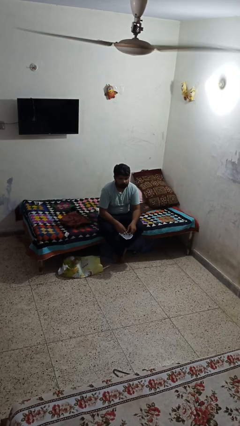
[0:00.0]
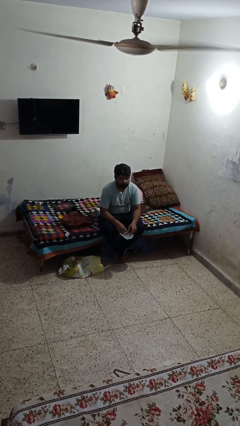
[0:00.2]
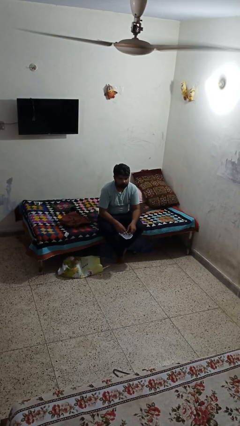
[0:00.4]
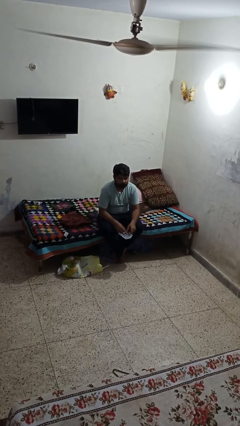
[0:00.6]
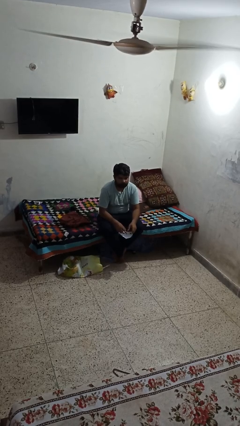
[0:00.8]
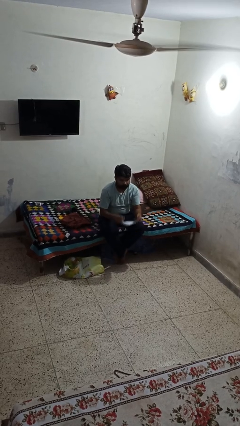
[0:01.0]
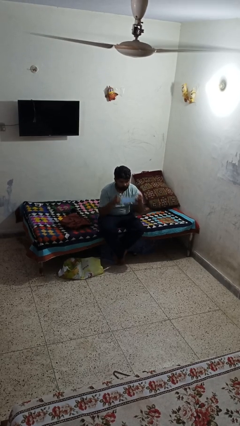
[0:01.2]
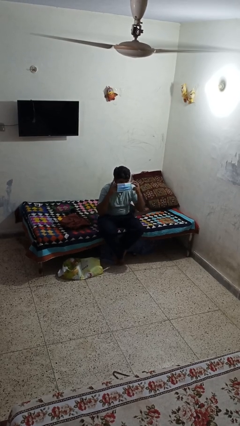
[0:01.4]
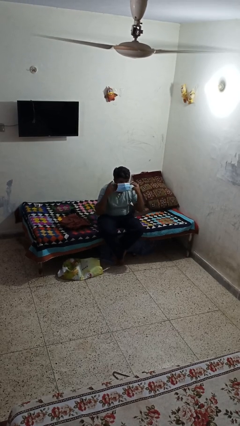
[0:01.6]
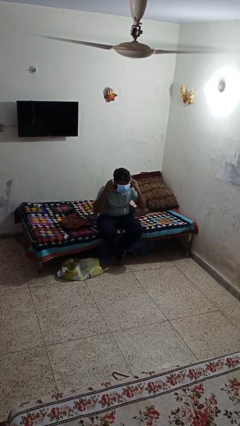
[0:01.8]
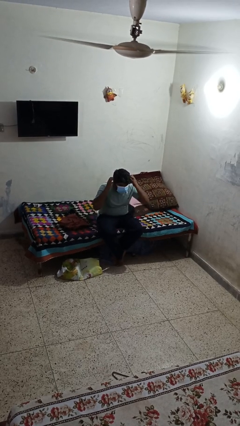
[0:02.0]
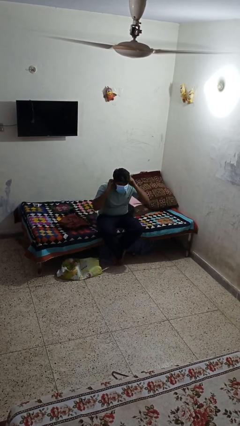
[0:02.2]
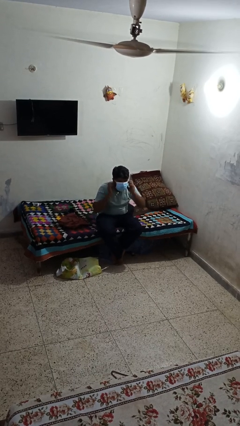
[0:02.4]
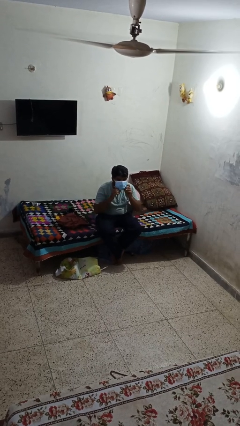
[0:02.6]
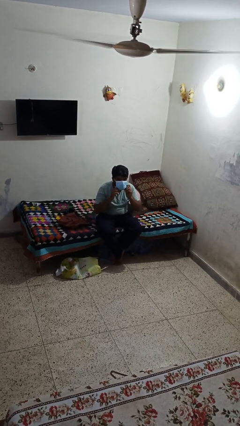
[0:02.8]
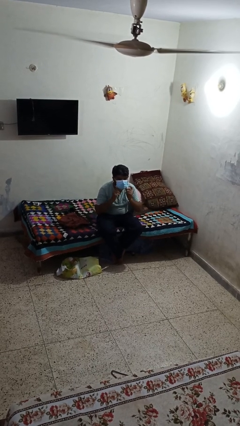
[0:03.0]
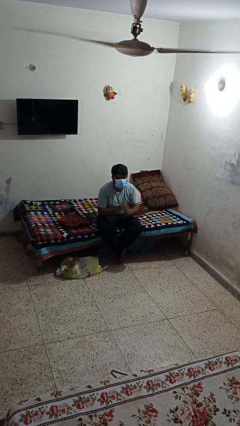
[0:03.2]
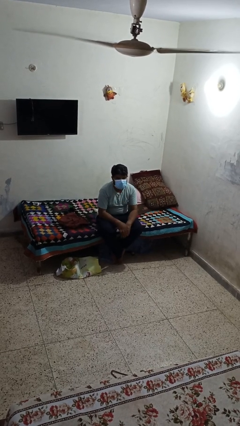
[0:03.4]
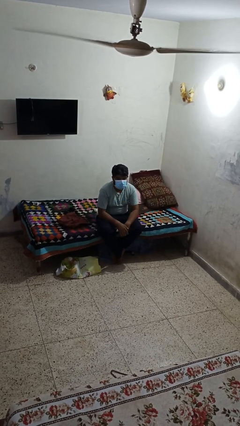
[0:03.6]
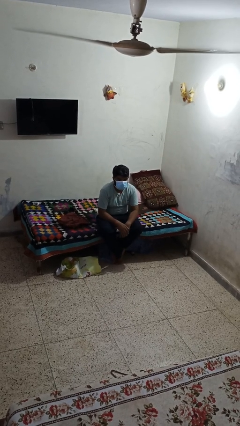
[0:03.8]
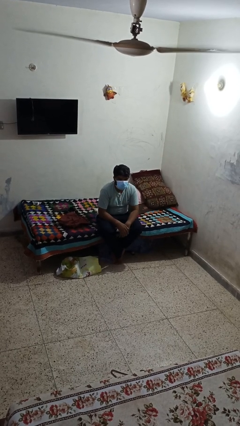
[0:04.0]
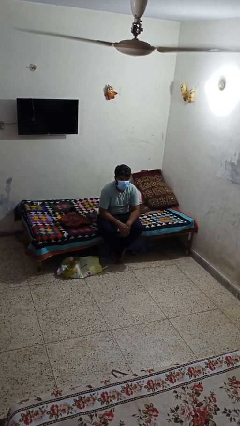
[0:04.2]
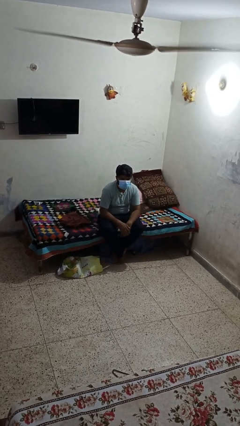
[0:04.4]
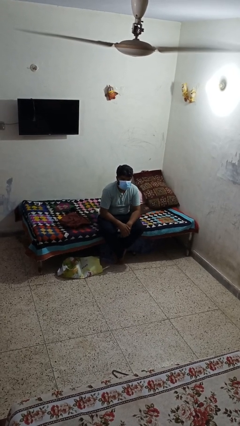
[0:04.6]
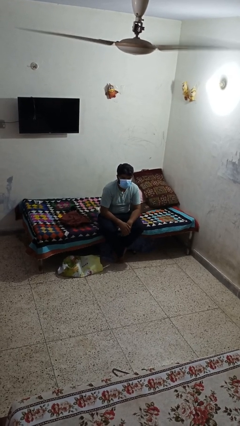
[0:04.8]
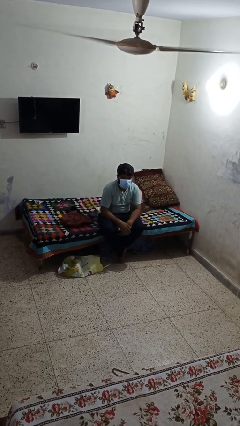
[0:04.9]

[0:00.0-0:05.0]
person puts on facemask

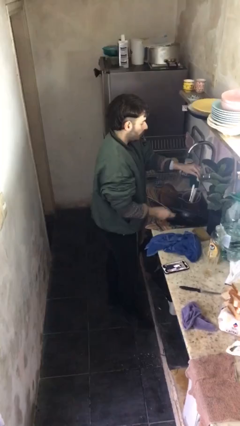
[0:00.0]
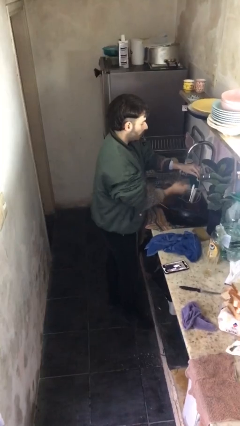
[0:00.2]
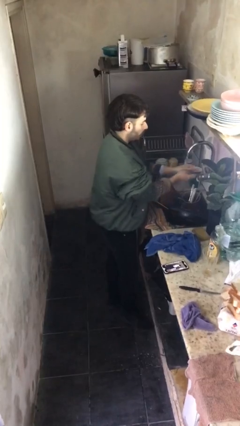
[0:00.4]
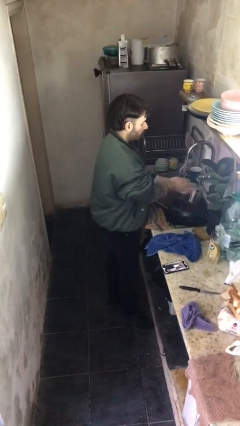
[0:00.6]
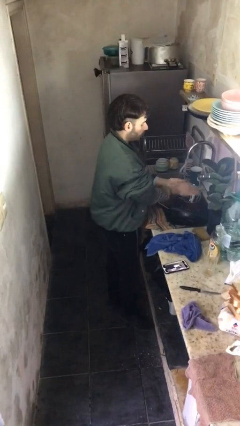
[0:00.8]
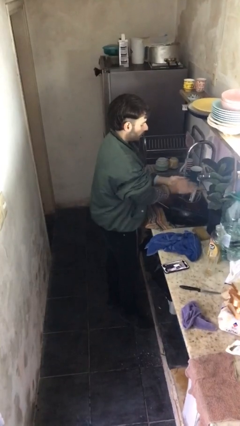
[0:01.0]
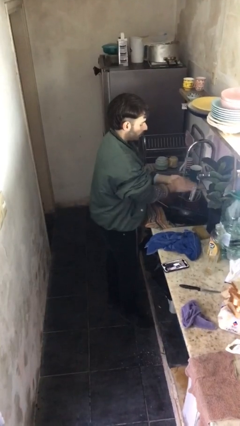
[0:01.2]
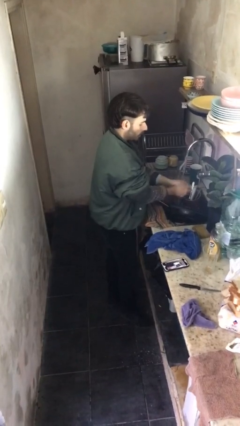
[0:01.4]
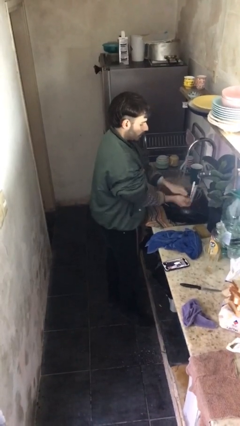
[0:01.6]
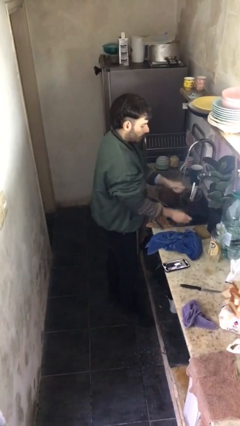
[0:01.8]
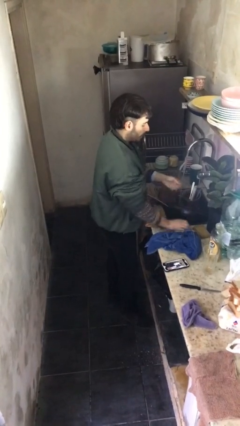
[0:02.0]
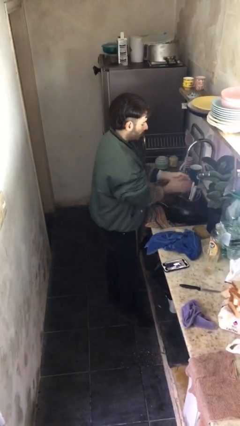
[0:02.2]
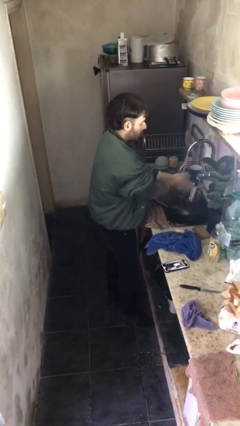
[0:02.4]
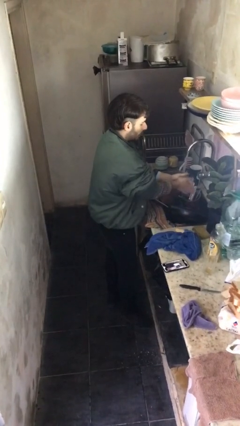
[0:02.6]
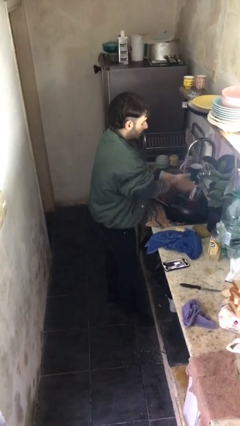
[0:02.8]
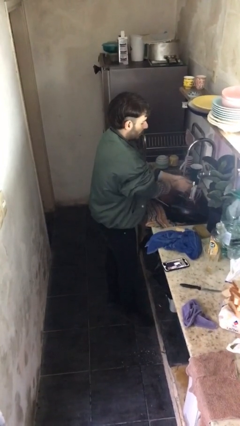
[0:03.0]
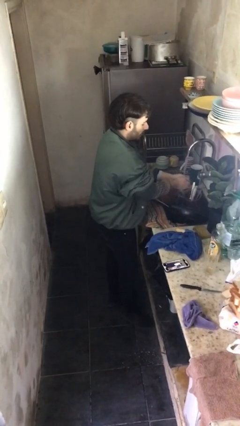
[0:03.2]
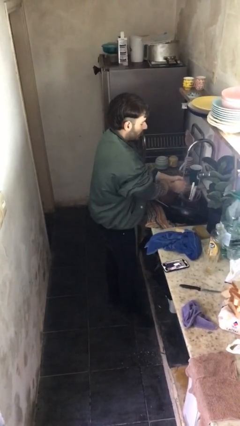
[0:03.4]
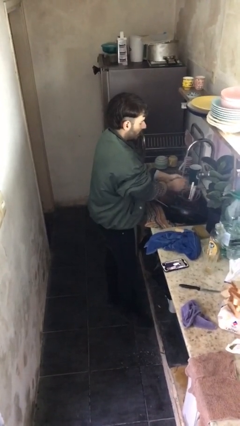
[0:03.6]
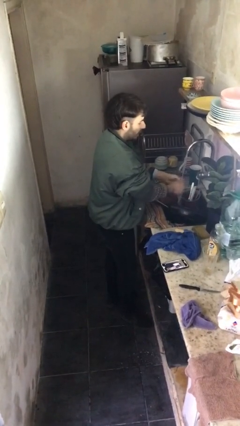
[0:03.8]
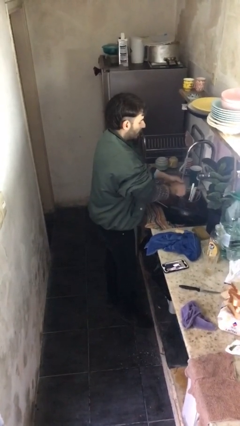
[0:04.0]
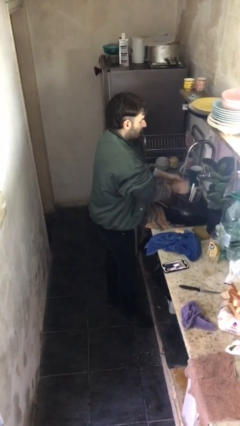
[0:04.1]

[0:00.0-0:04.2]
person washes hands

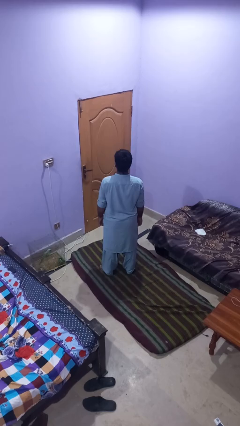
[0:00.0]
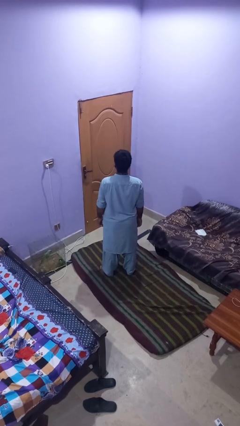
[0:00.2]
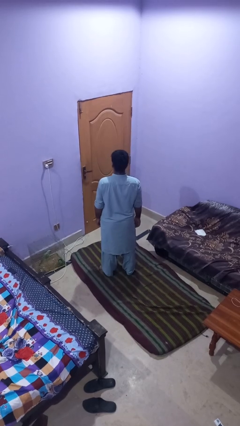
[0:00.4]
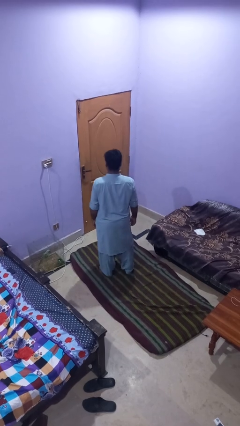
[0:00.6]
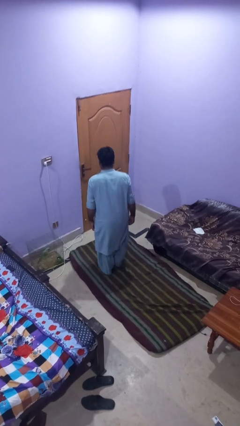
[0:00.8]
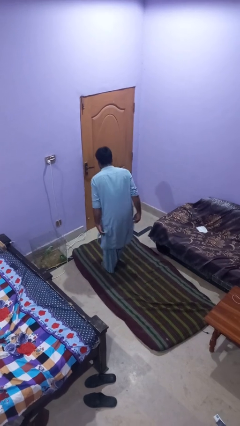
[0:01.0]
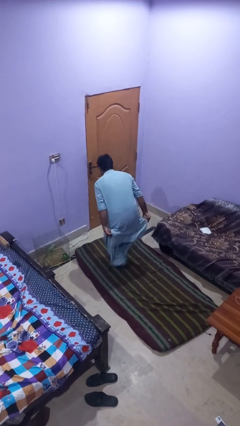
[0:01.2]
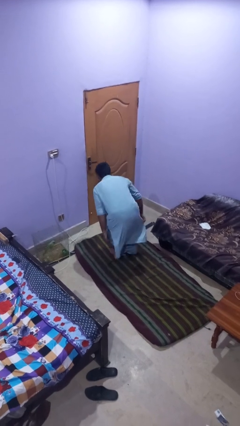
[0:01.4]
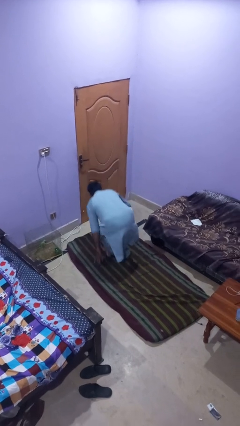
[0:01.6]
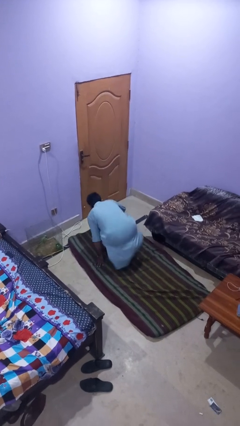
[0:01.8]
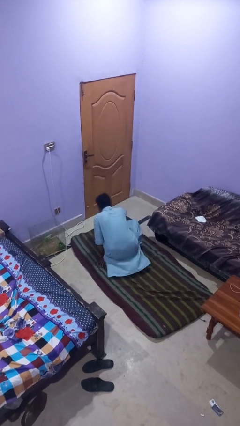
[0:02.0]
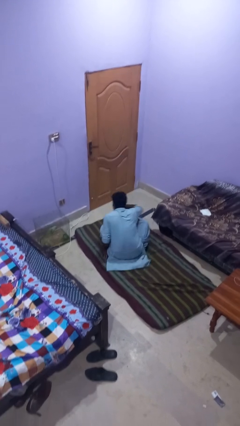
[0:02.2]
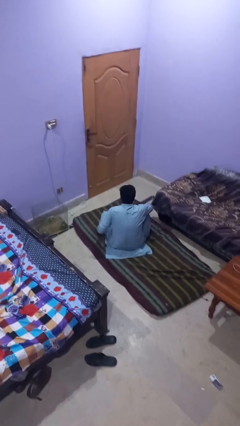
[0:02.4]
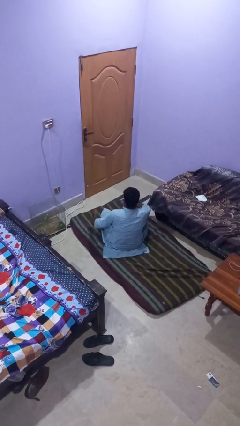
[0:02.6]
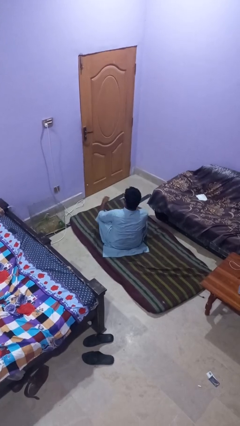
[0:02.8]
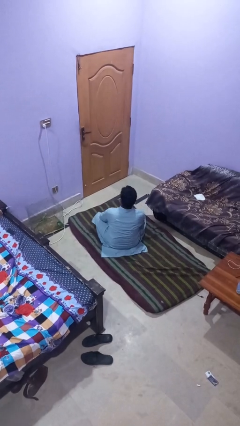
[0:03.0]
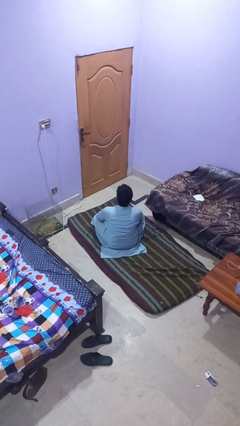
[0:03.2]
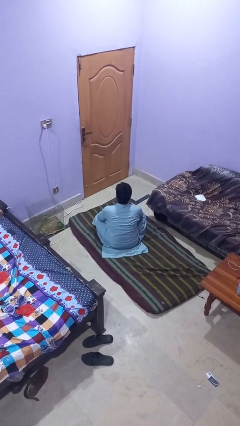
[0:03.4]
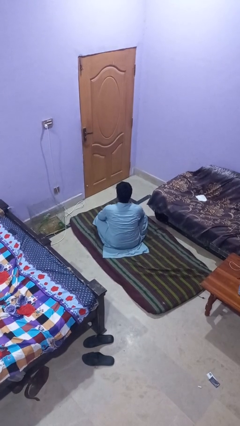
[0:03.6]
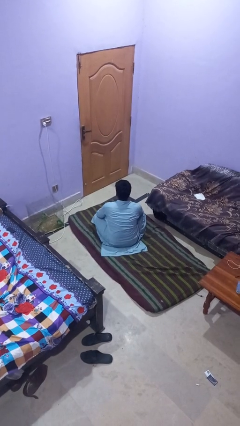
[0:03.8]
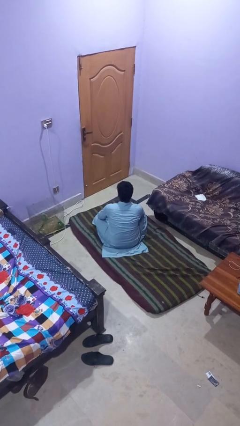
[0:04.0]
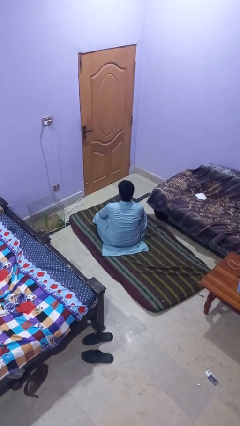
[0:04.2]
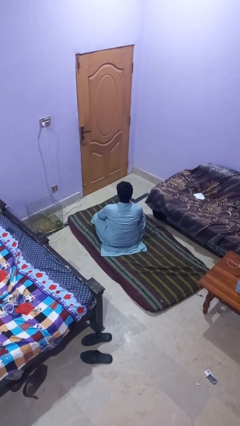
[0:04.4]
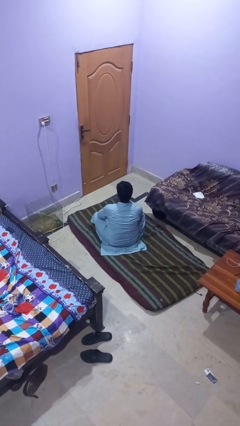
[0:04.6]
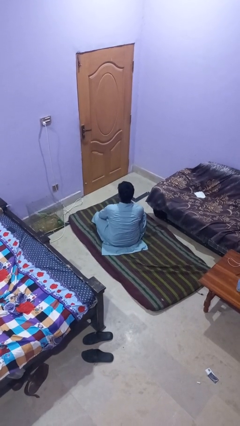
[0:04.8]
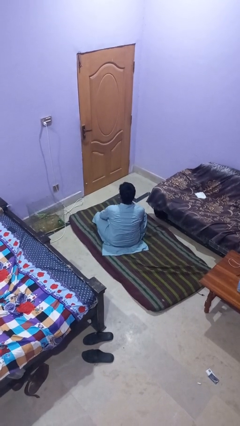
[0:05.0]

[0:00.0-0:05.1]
person sits crisscross

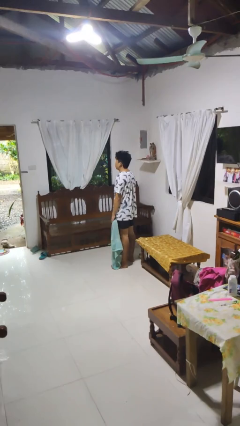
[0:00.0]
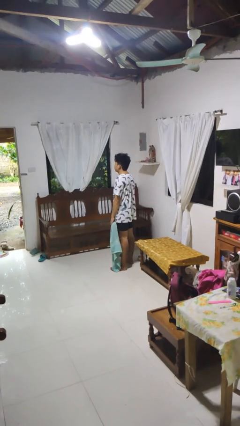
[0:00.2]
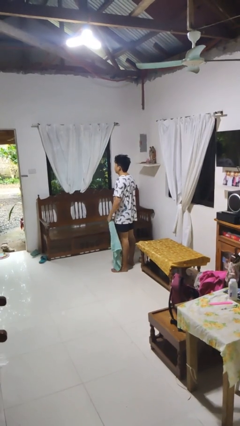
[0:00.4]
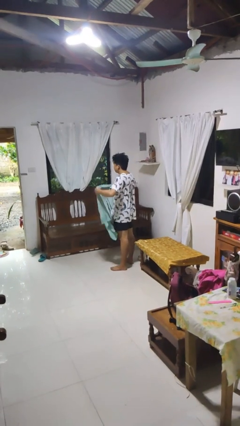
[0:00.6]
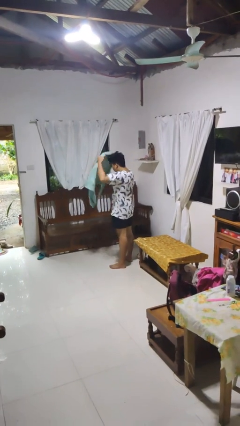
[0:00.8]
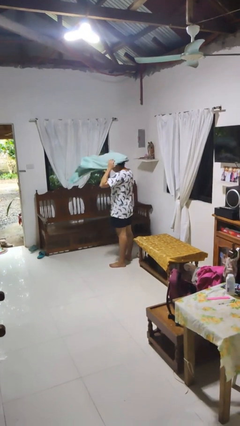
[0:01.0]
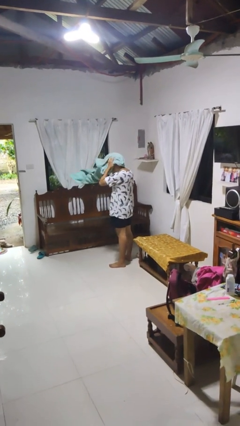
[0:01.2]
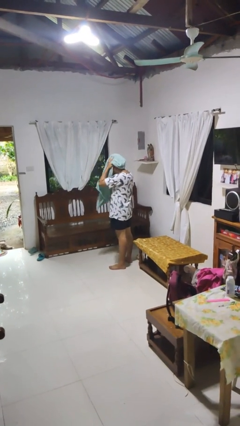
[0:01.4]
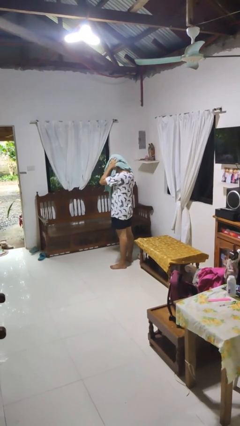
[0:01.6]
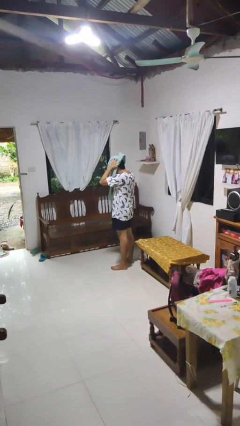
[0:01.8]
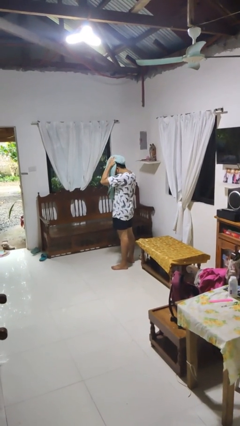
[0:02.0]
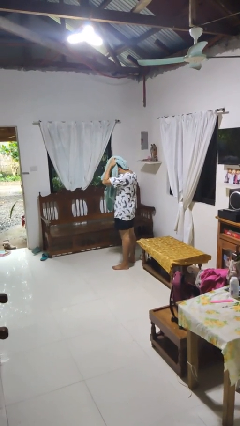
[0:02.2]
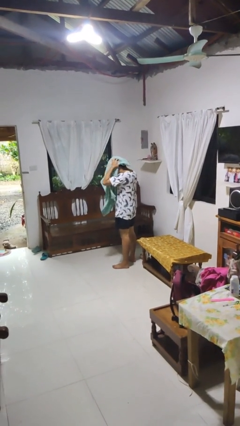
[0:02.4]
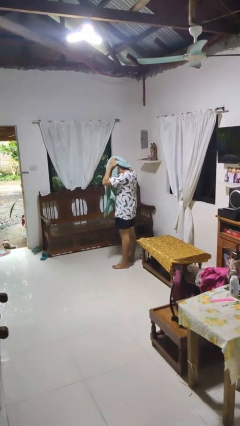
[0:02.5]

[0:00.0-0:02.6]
person dries hair with towel

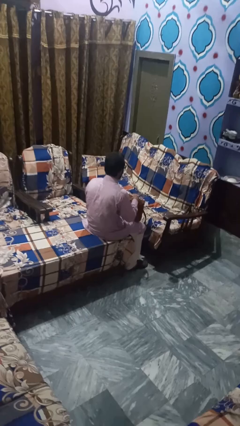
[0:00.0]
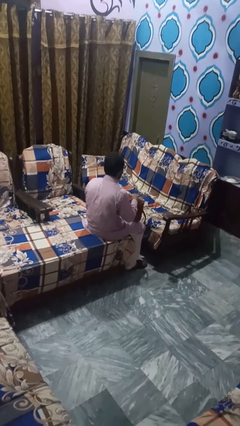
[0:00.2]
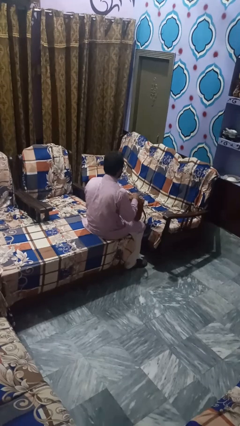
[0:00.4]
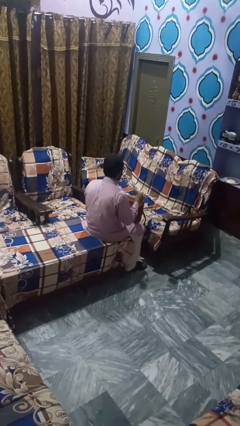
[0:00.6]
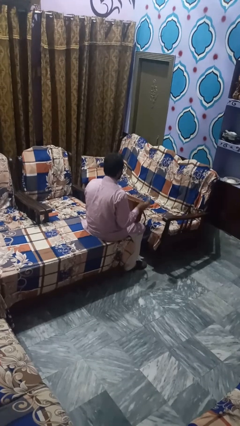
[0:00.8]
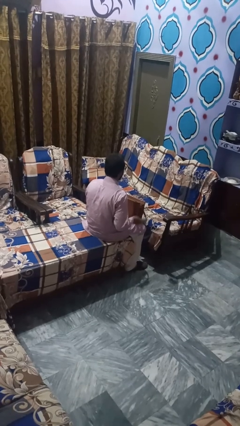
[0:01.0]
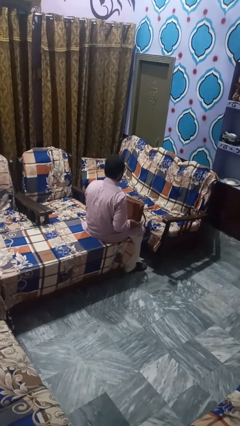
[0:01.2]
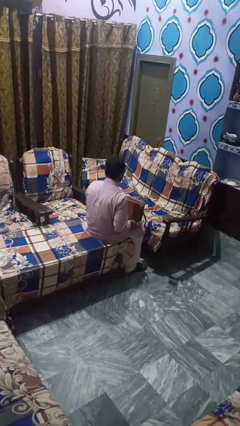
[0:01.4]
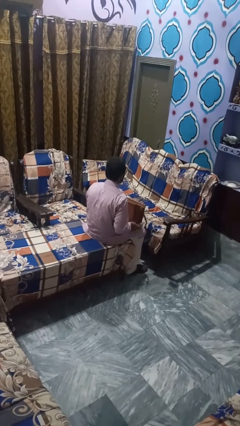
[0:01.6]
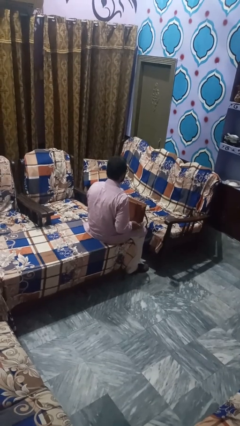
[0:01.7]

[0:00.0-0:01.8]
person puts object into bag
